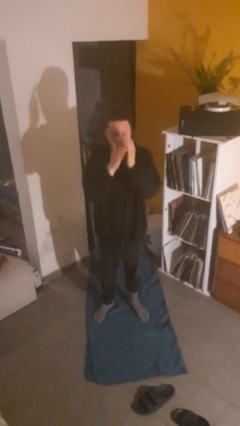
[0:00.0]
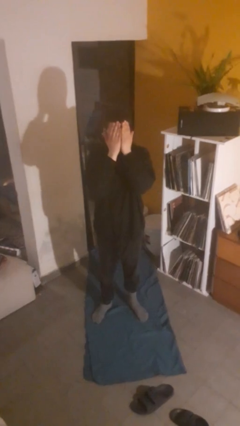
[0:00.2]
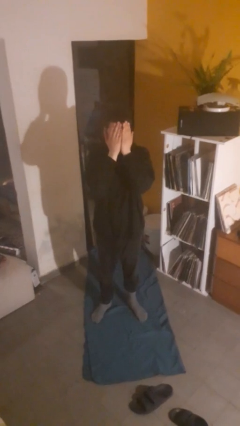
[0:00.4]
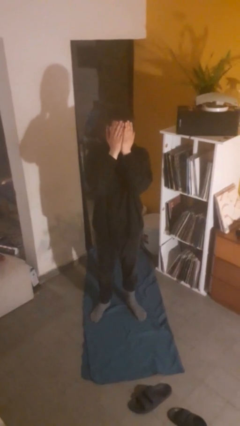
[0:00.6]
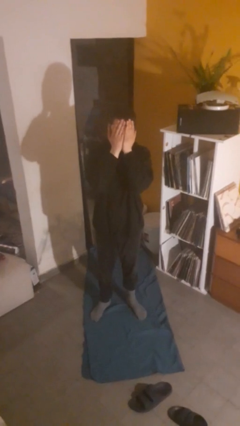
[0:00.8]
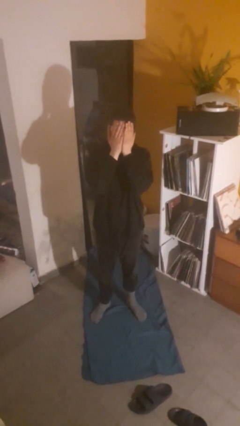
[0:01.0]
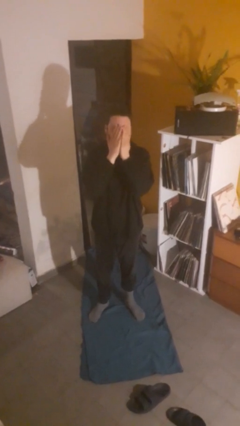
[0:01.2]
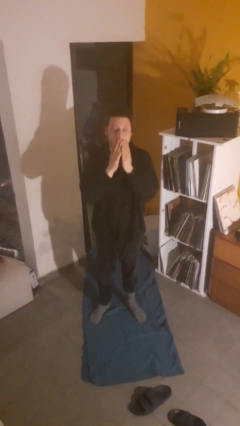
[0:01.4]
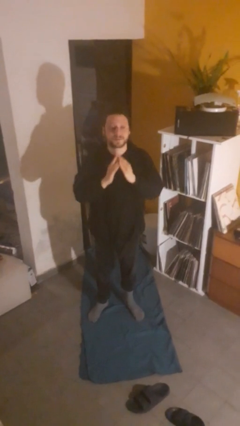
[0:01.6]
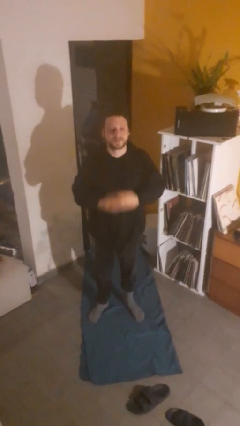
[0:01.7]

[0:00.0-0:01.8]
person covers face with hands

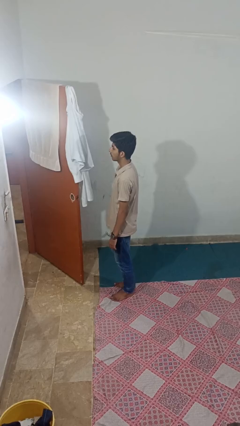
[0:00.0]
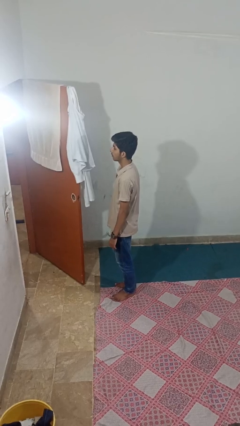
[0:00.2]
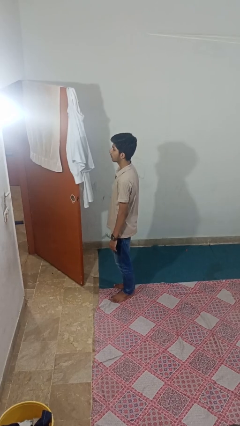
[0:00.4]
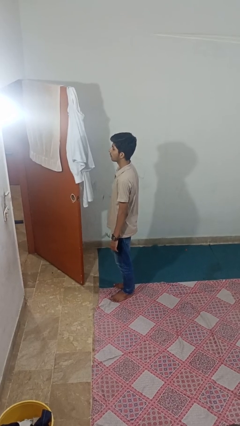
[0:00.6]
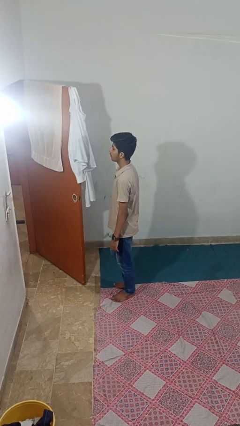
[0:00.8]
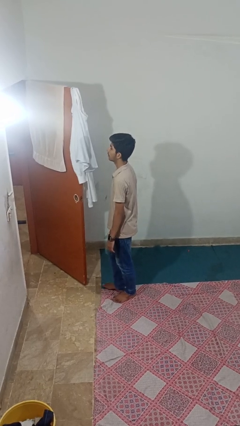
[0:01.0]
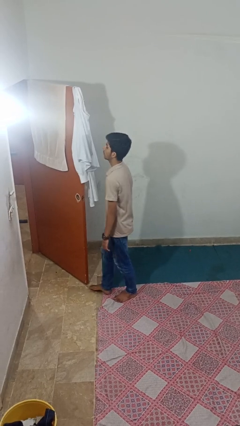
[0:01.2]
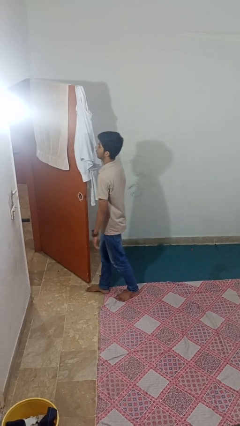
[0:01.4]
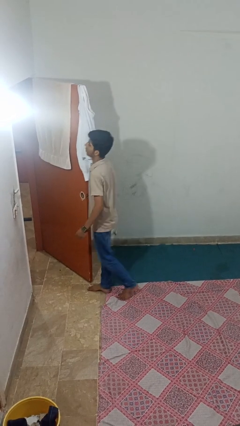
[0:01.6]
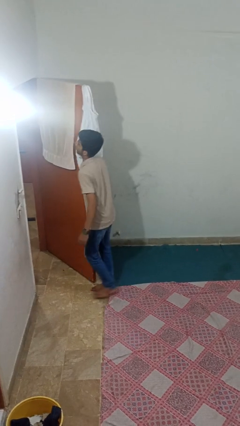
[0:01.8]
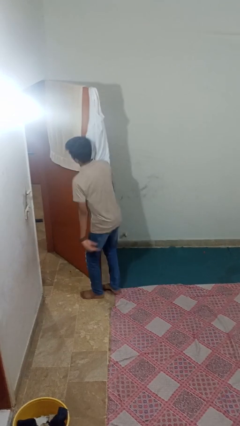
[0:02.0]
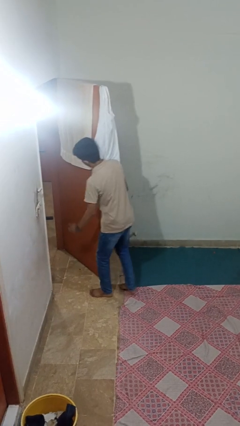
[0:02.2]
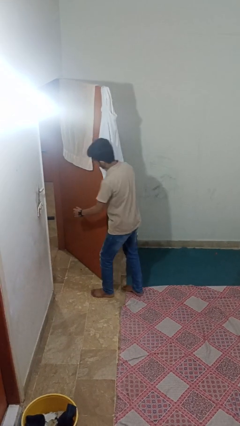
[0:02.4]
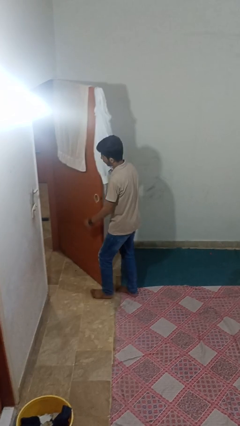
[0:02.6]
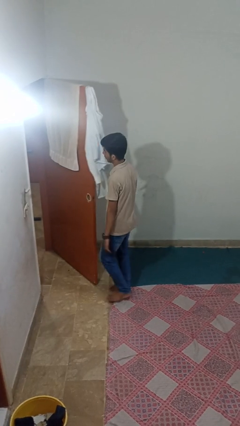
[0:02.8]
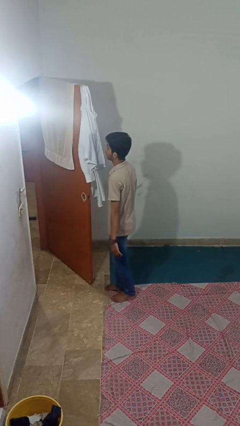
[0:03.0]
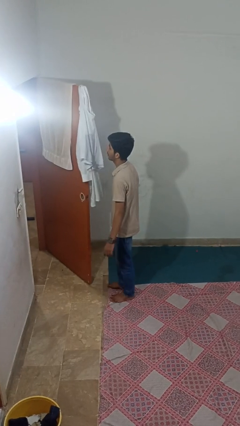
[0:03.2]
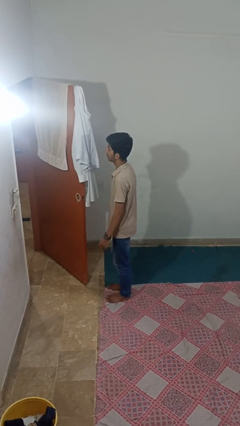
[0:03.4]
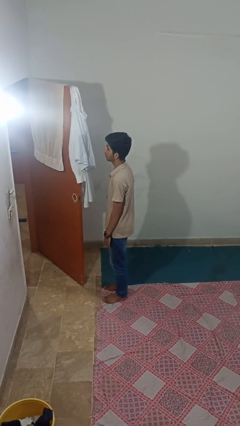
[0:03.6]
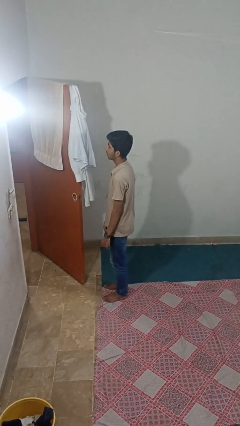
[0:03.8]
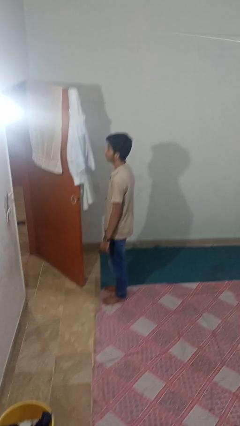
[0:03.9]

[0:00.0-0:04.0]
person bumps into wall

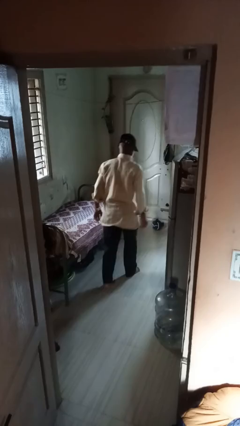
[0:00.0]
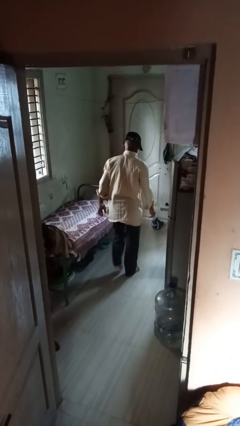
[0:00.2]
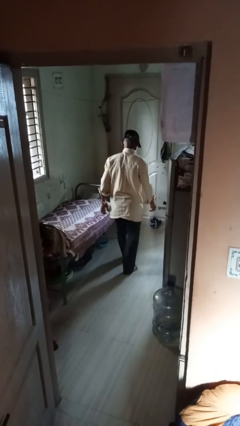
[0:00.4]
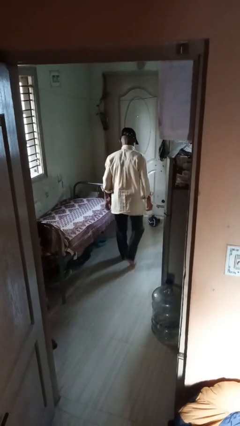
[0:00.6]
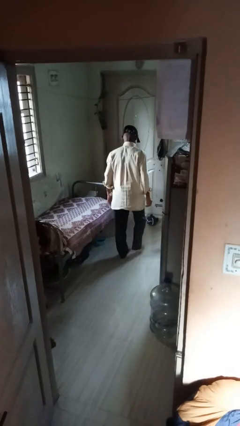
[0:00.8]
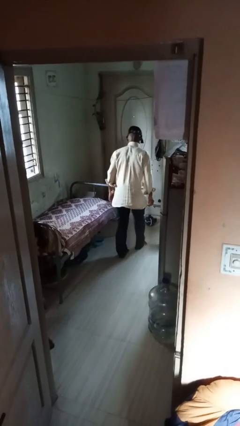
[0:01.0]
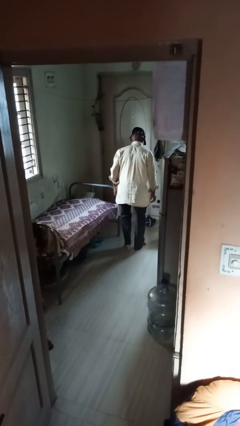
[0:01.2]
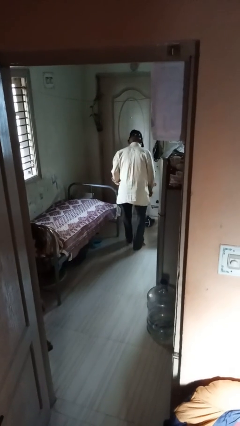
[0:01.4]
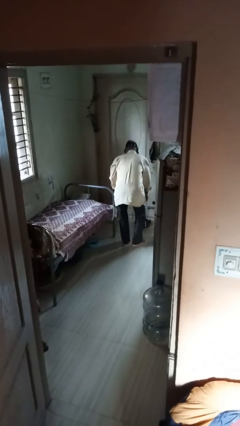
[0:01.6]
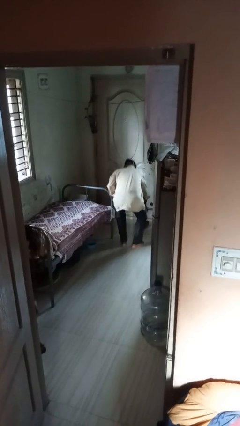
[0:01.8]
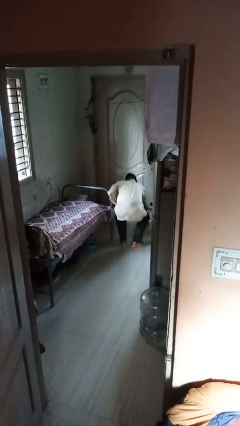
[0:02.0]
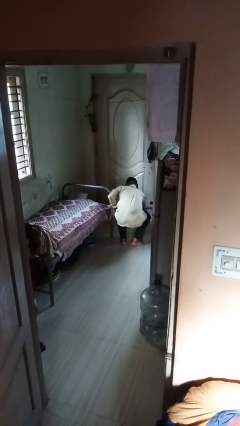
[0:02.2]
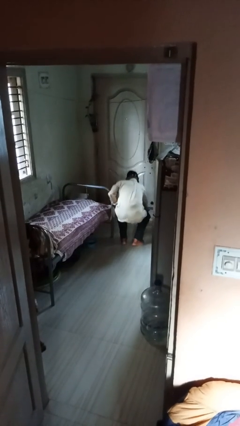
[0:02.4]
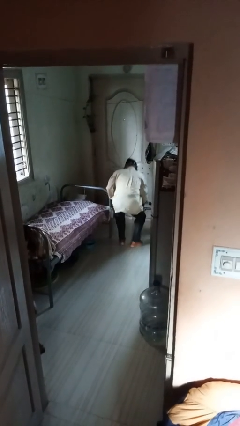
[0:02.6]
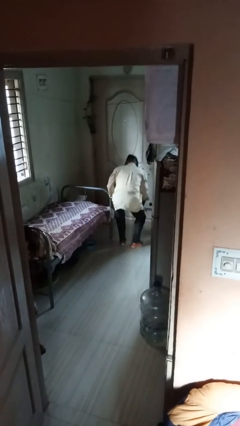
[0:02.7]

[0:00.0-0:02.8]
person picks up object from floor

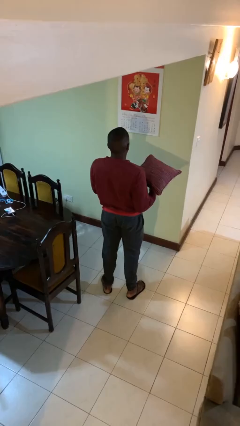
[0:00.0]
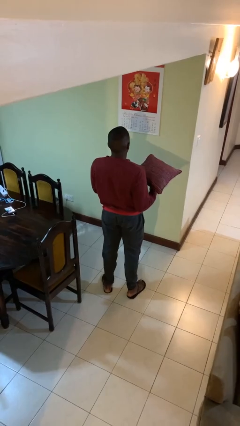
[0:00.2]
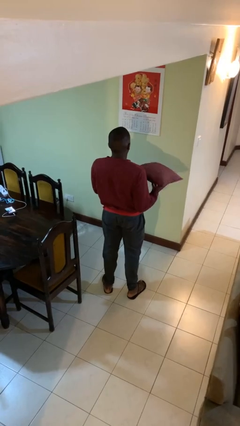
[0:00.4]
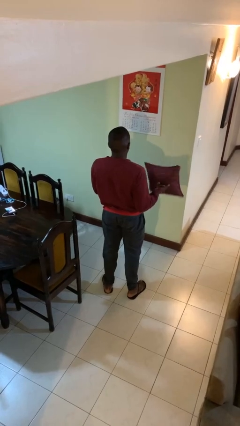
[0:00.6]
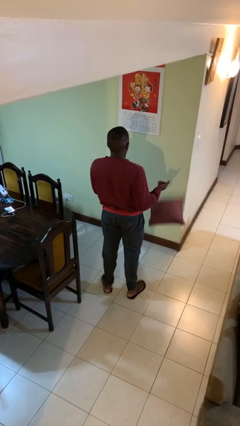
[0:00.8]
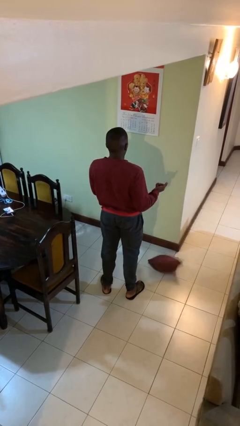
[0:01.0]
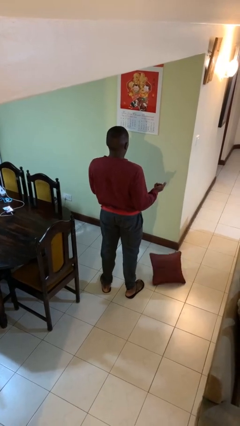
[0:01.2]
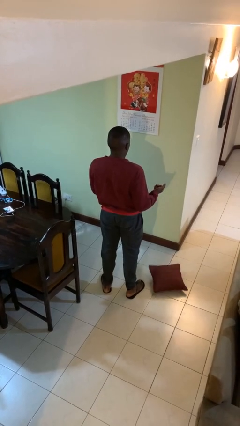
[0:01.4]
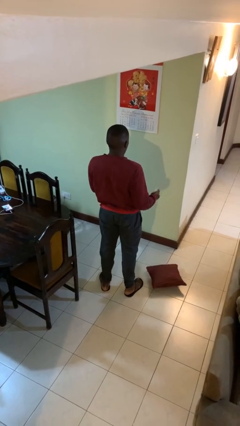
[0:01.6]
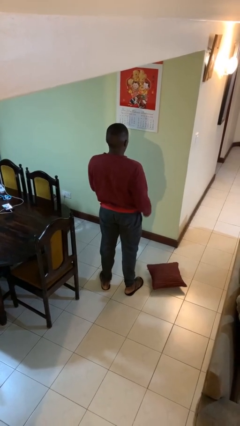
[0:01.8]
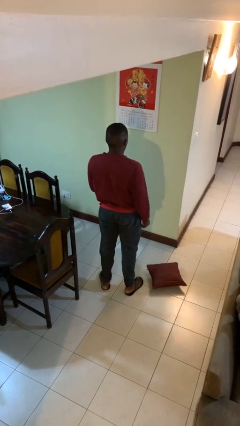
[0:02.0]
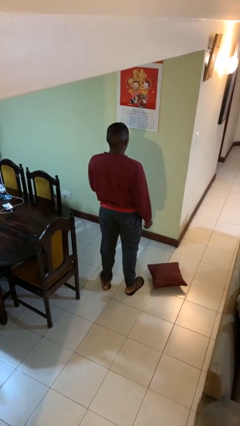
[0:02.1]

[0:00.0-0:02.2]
person drops object

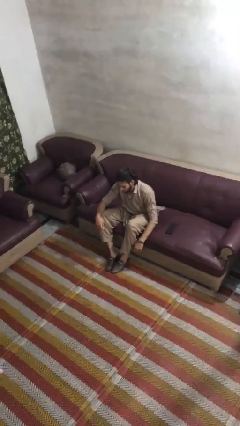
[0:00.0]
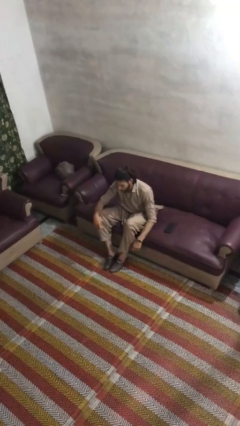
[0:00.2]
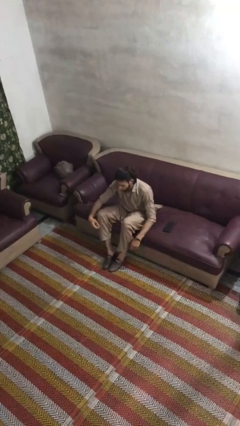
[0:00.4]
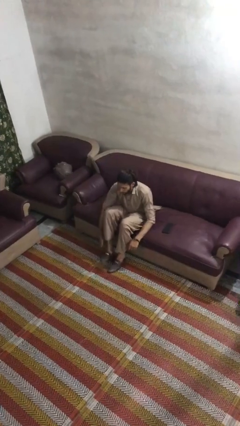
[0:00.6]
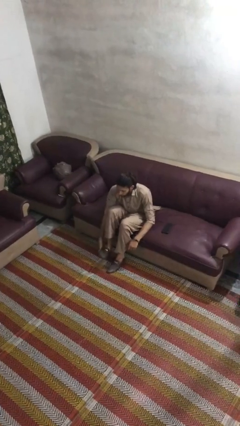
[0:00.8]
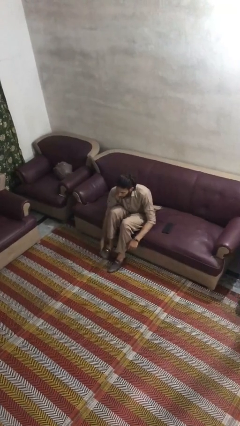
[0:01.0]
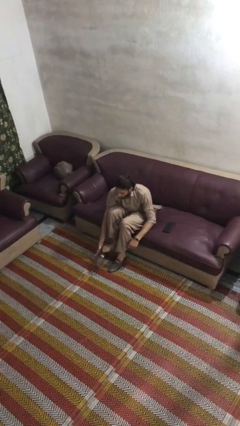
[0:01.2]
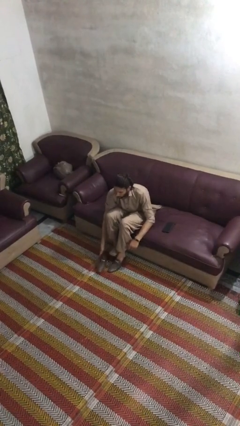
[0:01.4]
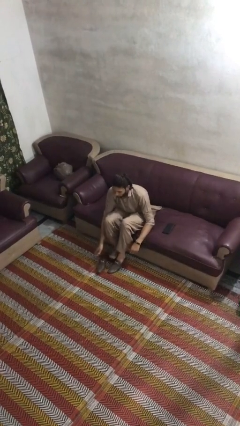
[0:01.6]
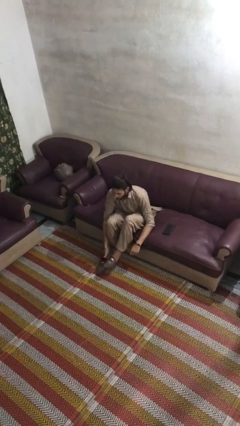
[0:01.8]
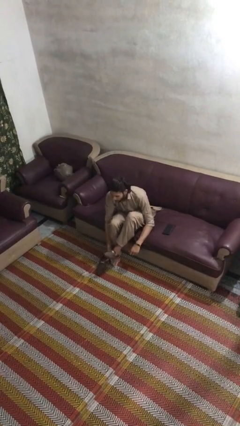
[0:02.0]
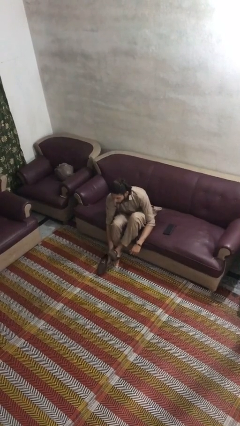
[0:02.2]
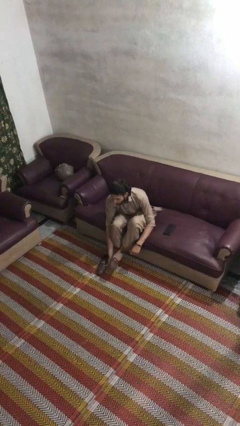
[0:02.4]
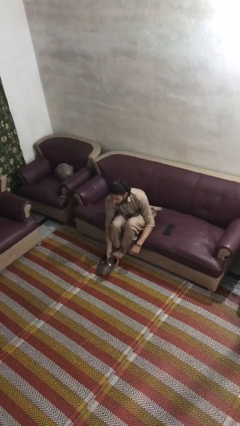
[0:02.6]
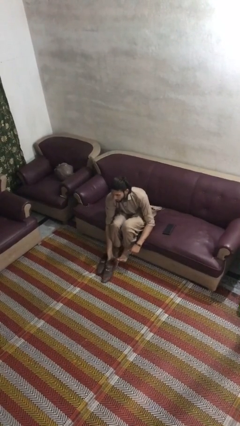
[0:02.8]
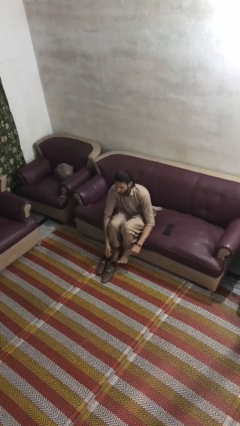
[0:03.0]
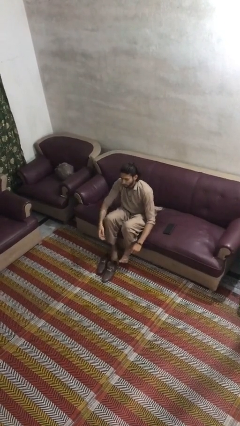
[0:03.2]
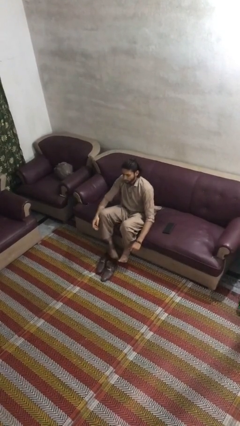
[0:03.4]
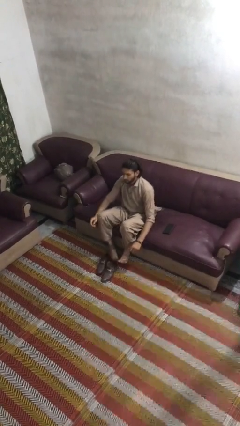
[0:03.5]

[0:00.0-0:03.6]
person takes off shoes

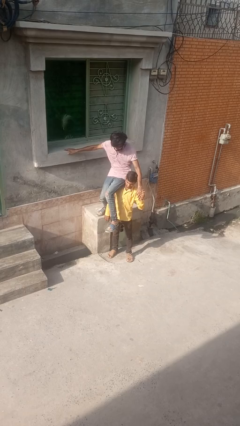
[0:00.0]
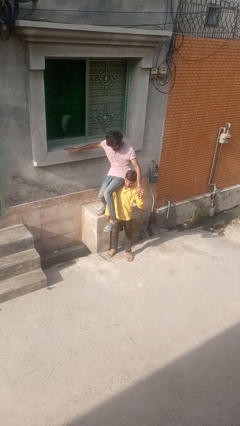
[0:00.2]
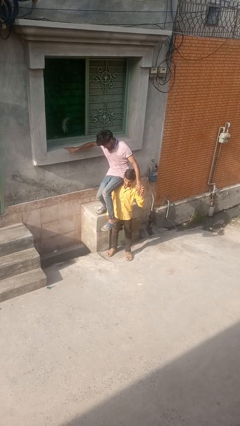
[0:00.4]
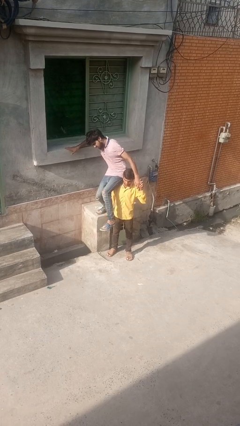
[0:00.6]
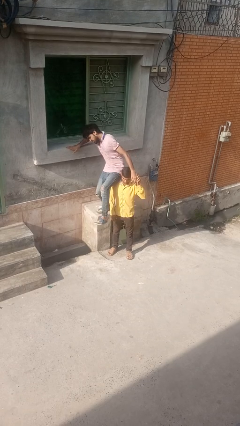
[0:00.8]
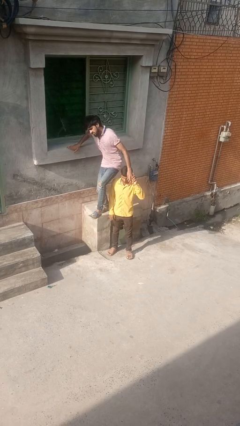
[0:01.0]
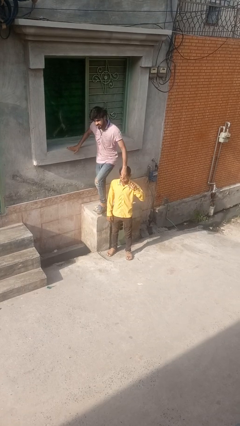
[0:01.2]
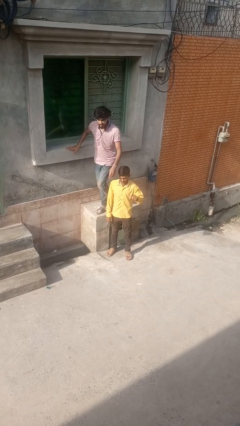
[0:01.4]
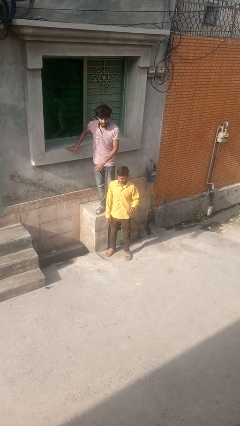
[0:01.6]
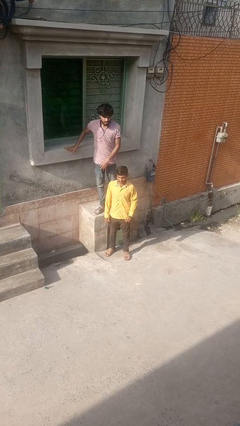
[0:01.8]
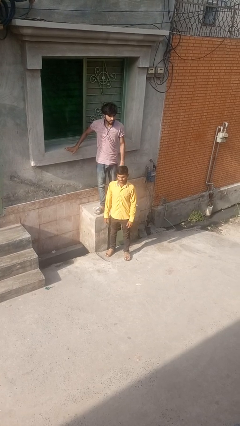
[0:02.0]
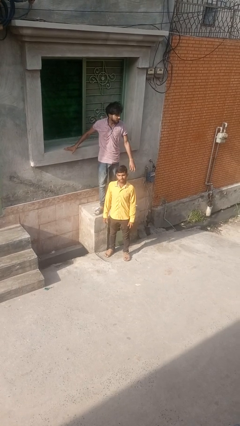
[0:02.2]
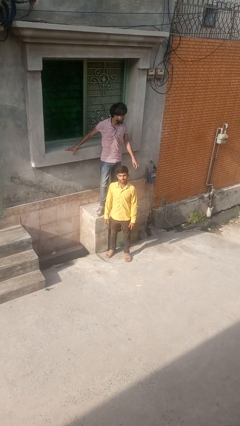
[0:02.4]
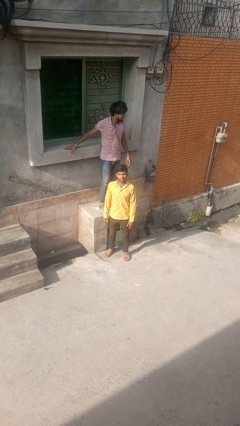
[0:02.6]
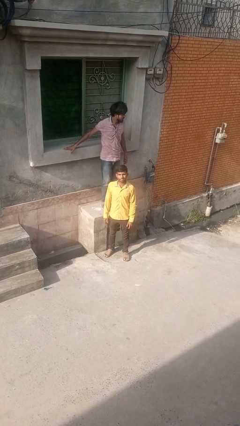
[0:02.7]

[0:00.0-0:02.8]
person puts down person
